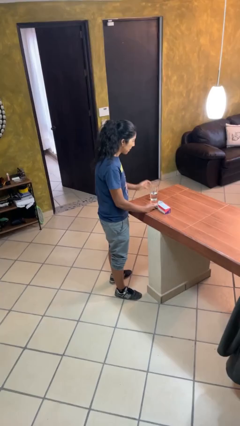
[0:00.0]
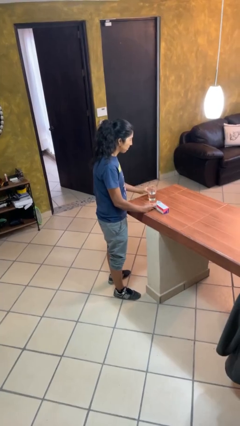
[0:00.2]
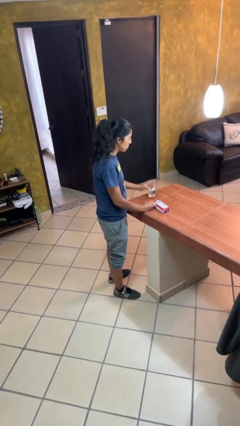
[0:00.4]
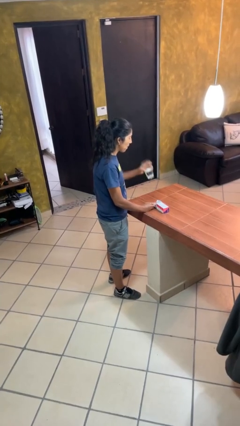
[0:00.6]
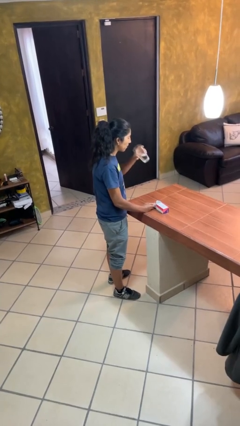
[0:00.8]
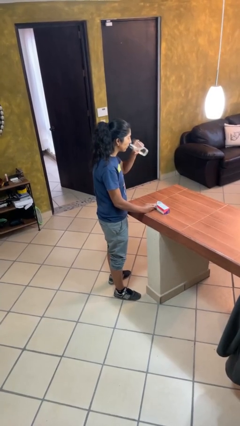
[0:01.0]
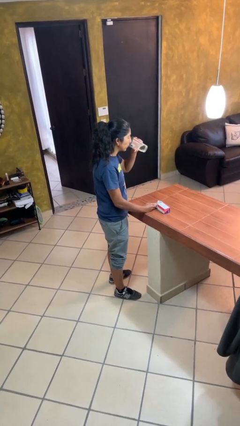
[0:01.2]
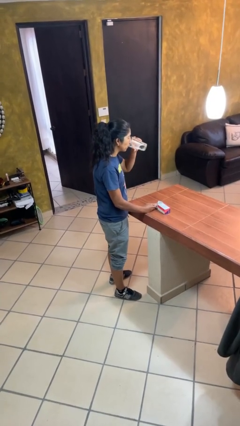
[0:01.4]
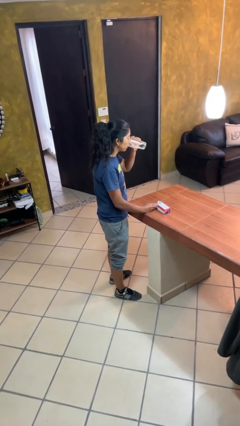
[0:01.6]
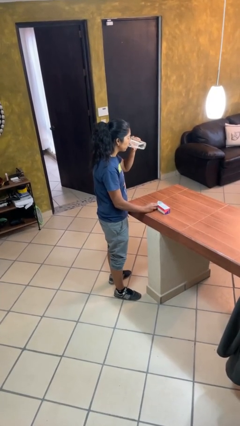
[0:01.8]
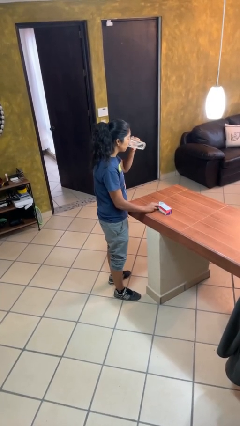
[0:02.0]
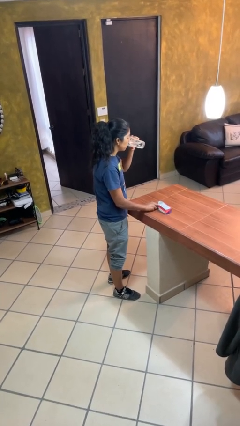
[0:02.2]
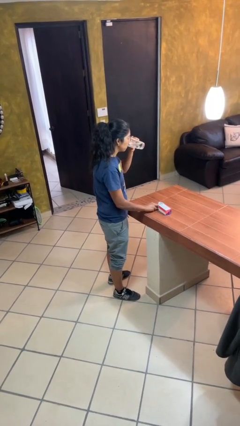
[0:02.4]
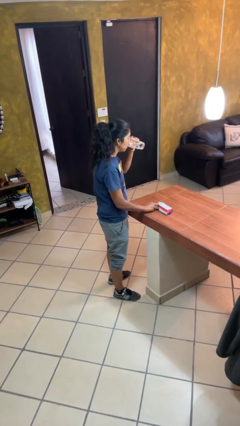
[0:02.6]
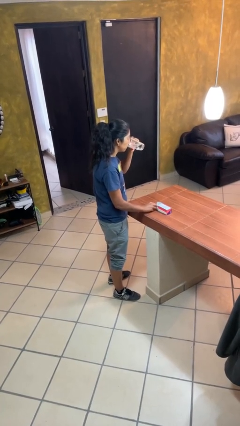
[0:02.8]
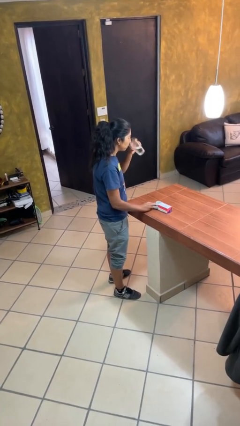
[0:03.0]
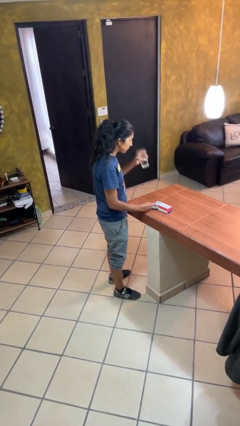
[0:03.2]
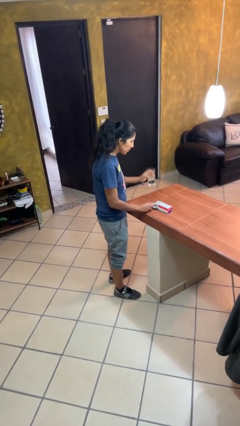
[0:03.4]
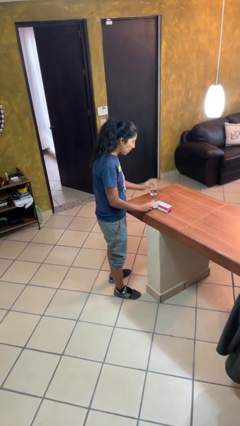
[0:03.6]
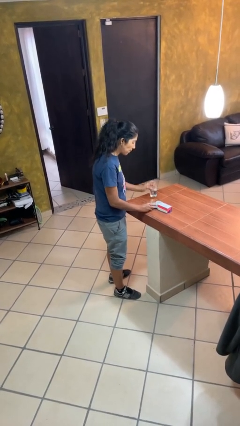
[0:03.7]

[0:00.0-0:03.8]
person drinks from cup

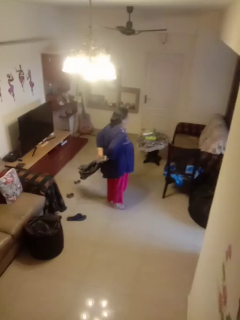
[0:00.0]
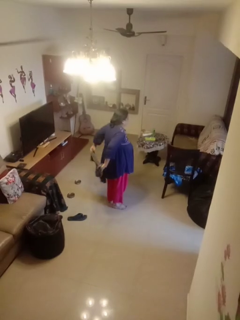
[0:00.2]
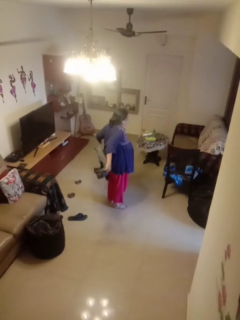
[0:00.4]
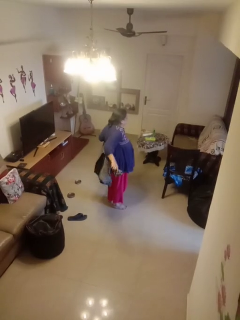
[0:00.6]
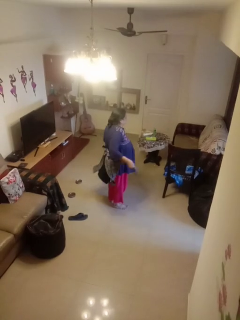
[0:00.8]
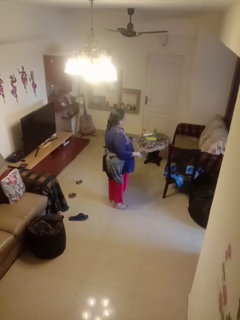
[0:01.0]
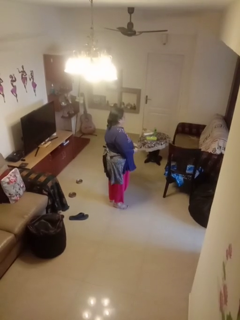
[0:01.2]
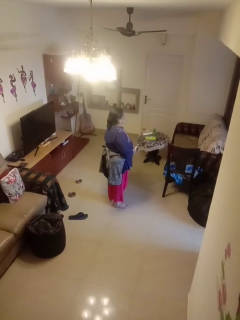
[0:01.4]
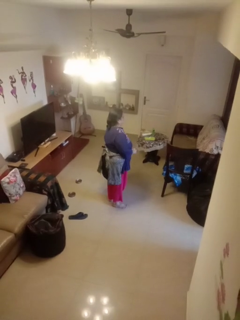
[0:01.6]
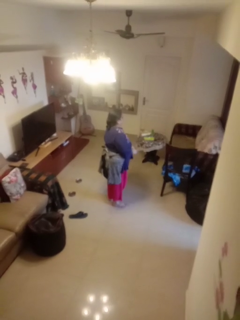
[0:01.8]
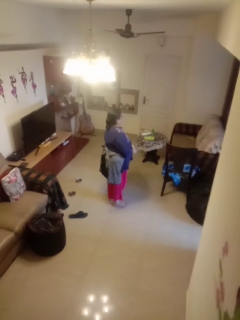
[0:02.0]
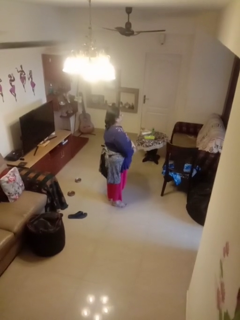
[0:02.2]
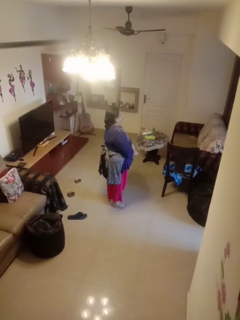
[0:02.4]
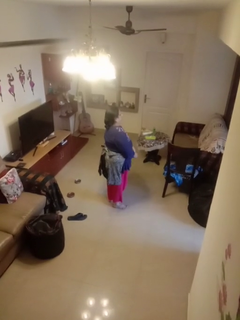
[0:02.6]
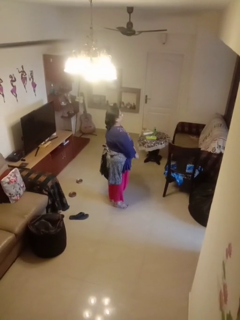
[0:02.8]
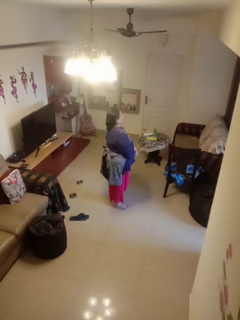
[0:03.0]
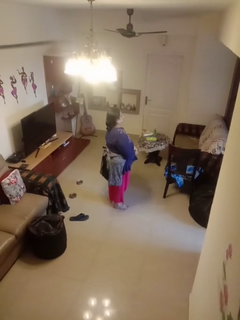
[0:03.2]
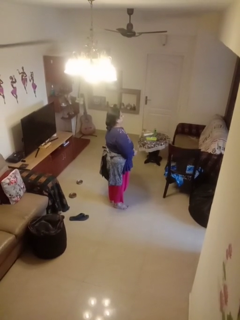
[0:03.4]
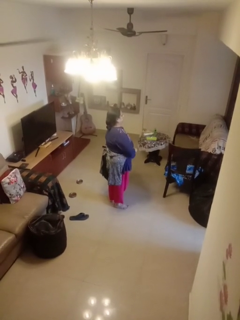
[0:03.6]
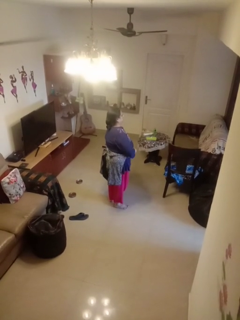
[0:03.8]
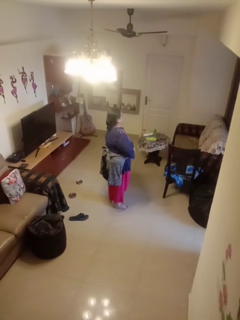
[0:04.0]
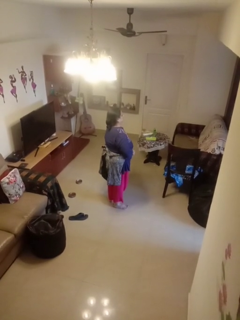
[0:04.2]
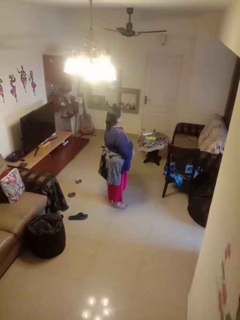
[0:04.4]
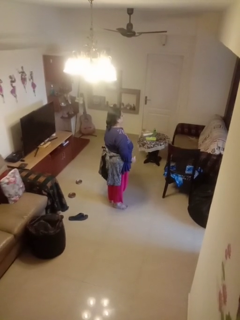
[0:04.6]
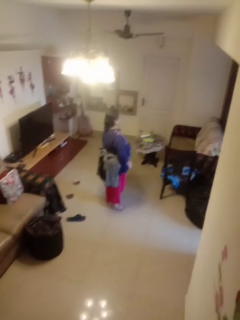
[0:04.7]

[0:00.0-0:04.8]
person ties jacket around waist

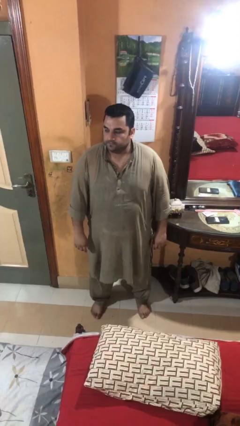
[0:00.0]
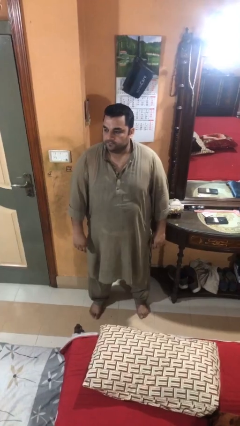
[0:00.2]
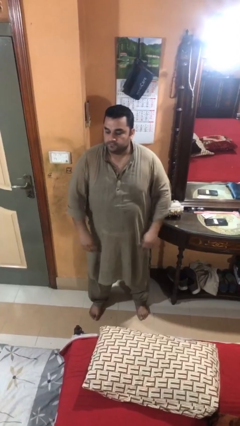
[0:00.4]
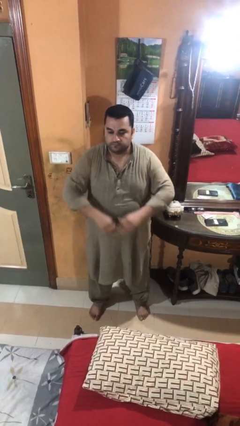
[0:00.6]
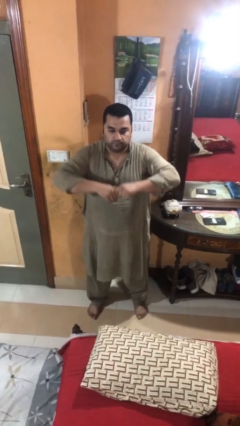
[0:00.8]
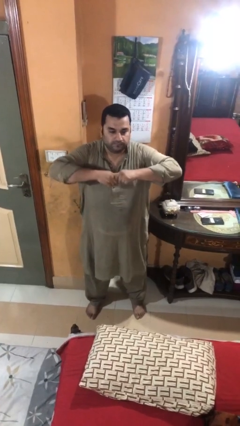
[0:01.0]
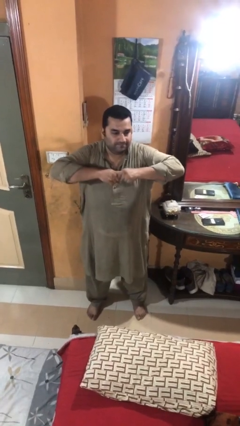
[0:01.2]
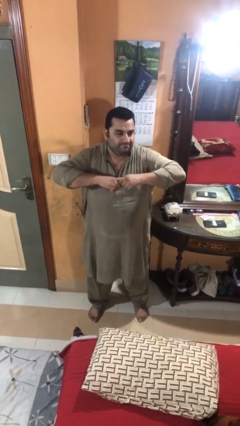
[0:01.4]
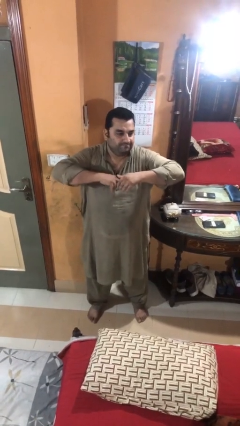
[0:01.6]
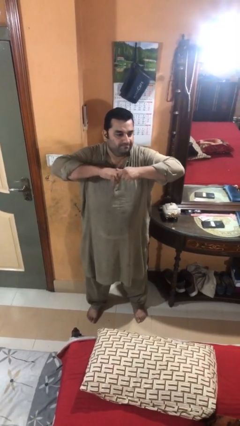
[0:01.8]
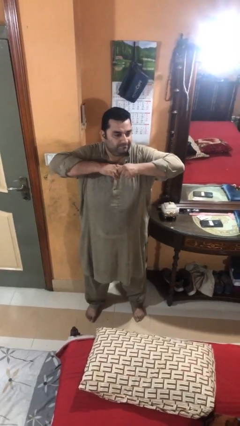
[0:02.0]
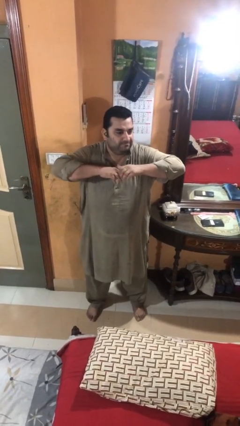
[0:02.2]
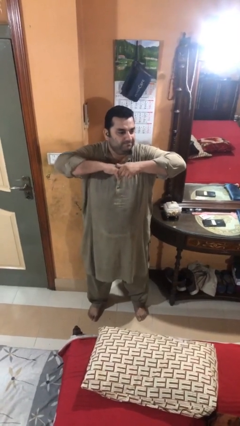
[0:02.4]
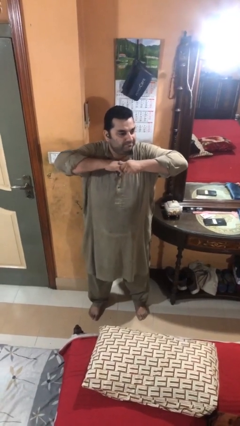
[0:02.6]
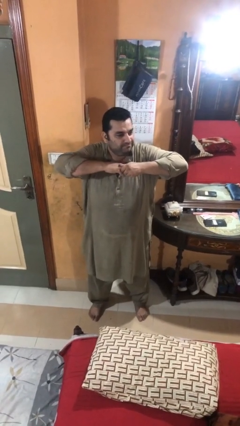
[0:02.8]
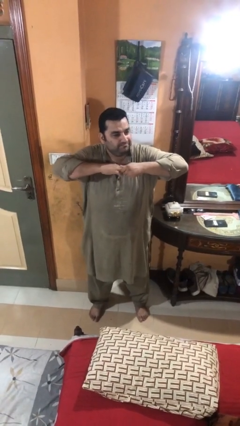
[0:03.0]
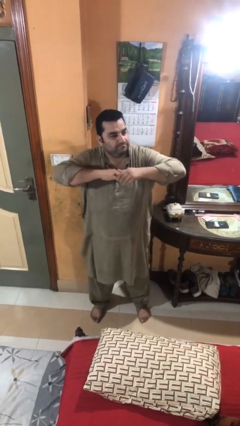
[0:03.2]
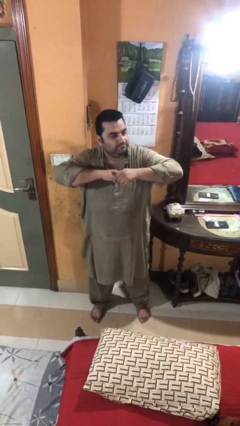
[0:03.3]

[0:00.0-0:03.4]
person cracks knuckles

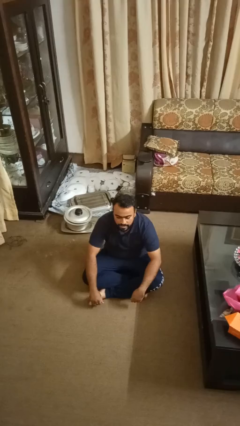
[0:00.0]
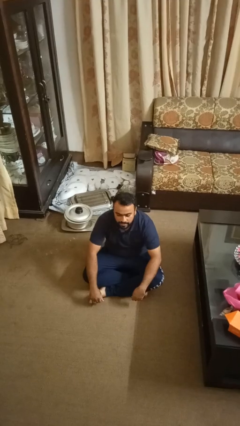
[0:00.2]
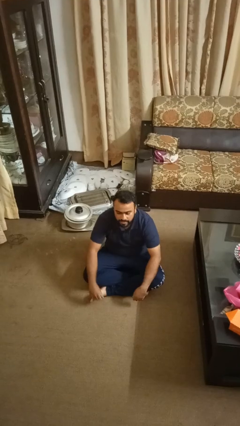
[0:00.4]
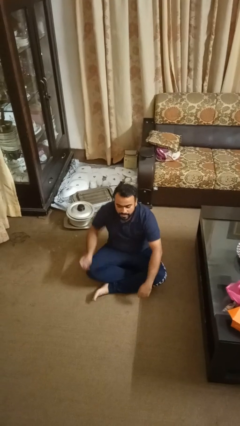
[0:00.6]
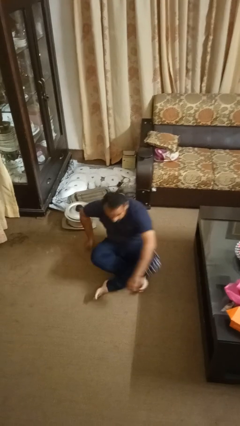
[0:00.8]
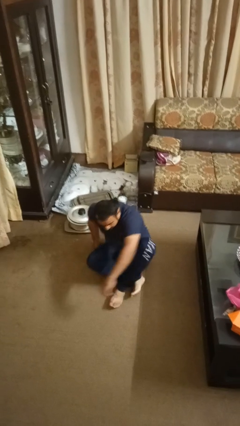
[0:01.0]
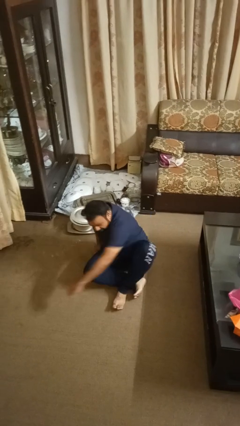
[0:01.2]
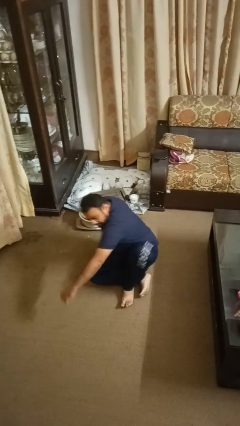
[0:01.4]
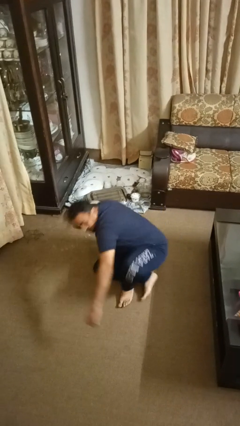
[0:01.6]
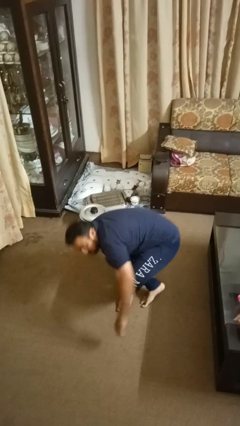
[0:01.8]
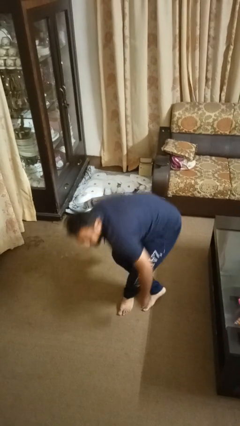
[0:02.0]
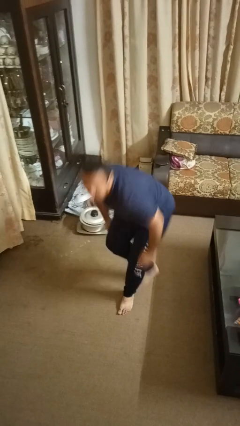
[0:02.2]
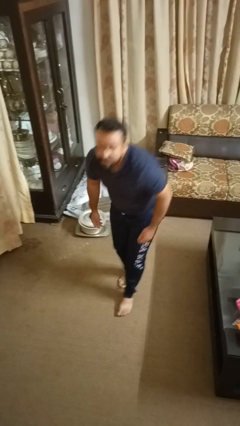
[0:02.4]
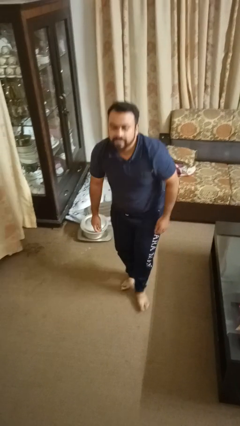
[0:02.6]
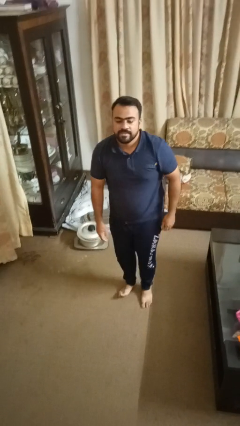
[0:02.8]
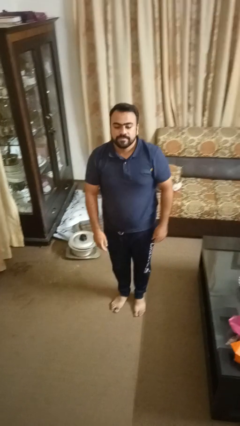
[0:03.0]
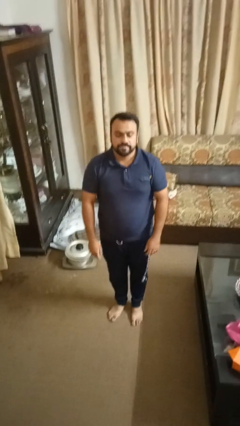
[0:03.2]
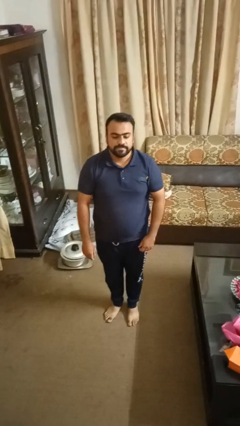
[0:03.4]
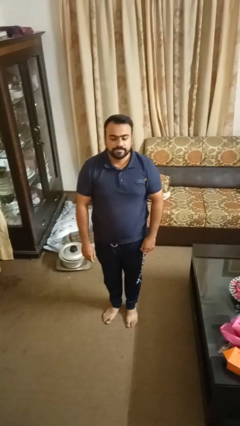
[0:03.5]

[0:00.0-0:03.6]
person stands up from floor

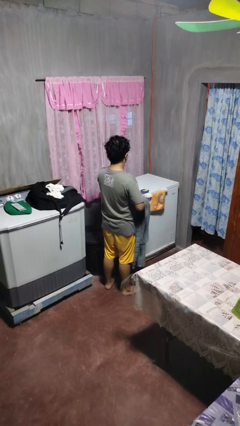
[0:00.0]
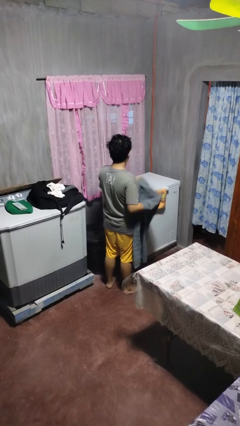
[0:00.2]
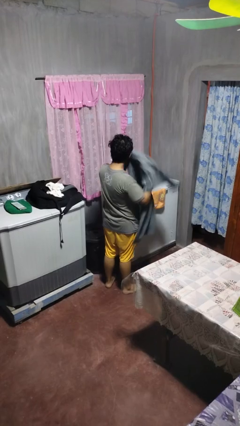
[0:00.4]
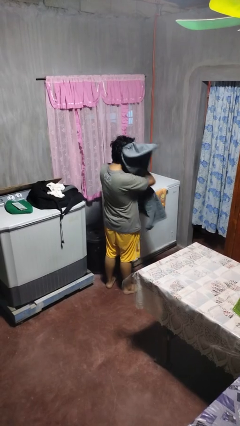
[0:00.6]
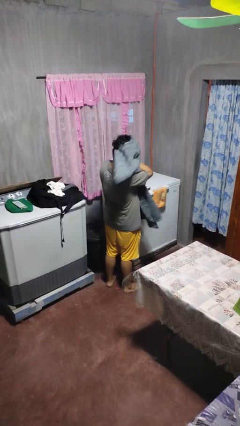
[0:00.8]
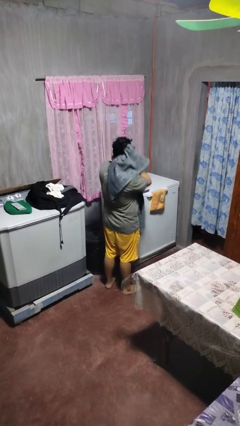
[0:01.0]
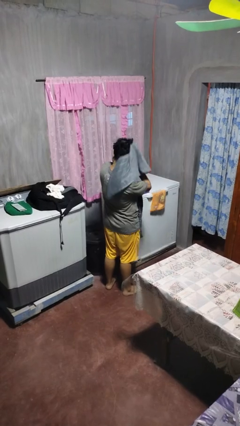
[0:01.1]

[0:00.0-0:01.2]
person dries hair with towel

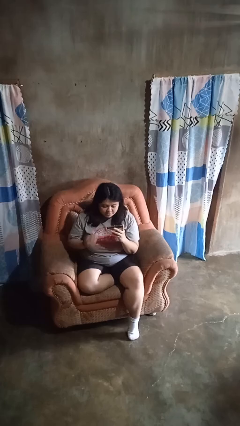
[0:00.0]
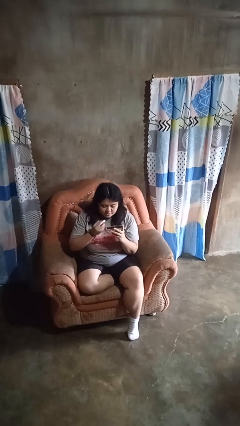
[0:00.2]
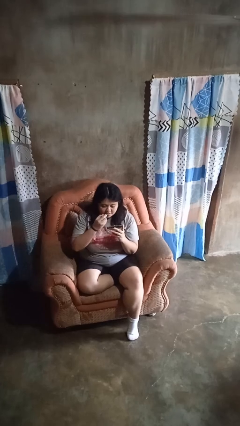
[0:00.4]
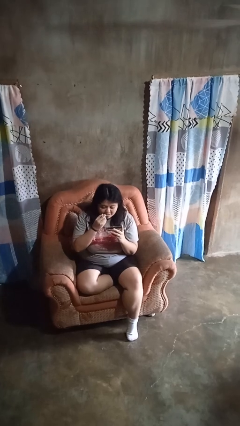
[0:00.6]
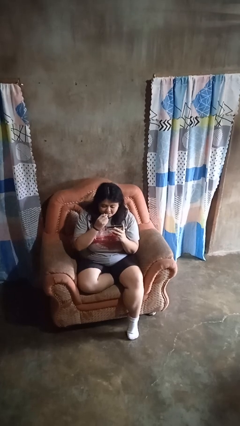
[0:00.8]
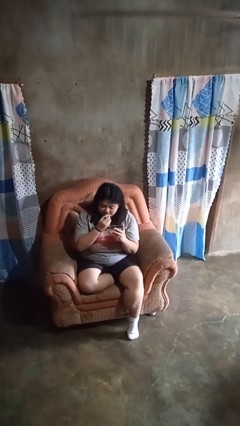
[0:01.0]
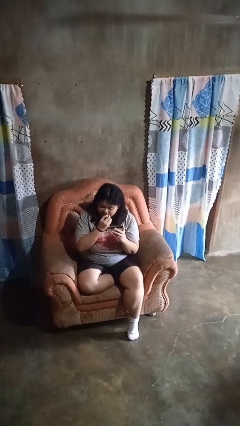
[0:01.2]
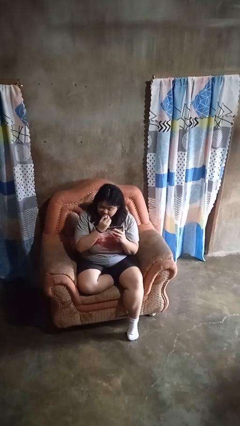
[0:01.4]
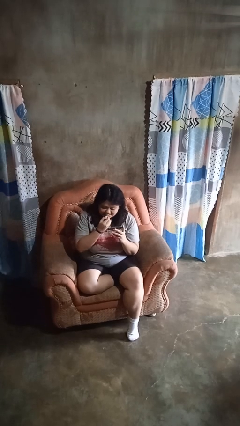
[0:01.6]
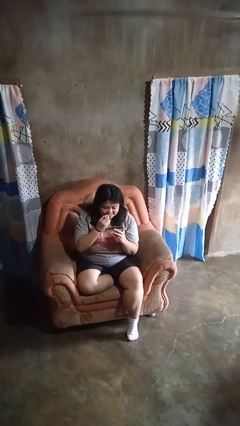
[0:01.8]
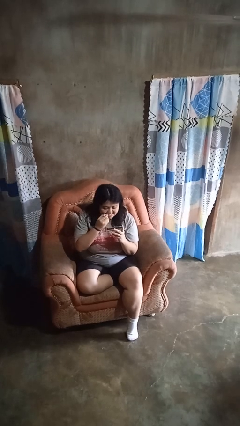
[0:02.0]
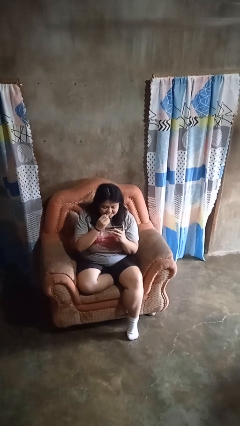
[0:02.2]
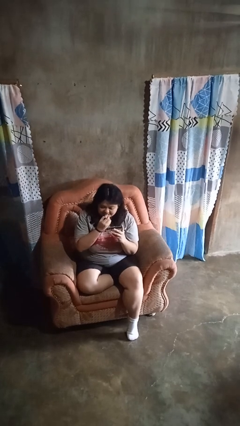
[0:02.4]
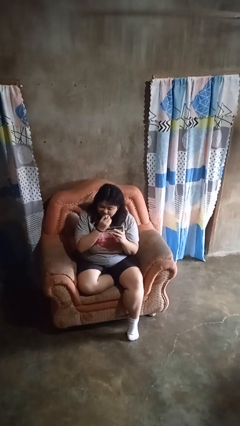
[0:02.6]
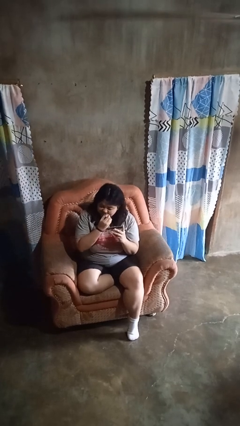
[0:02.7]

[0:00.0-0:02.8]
person applies lip makeup
